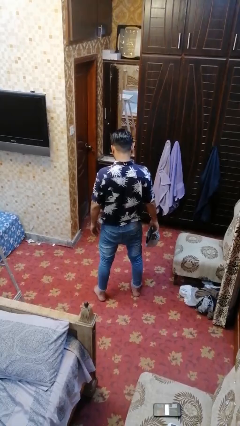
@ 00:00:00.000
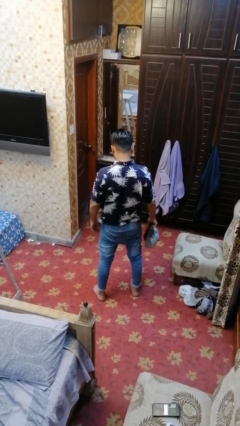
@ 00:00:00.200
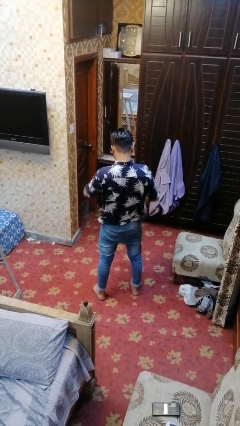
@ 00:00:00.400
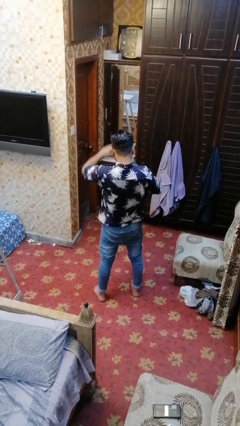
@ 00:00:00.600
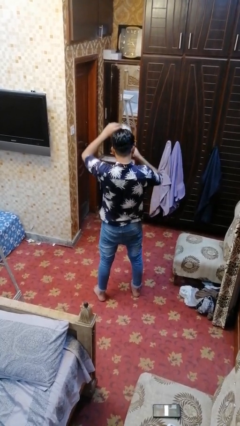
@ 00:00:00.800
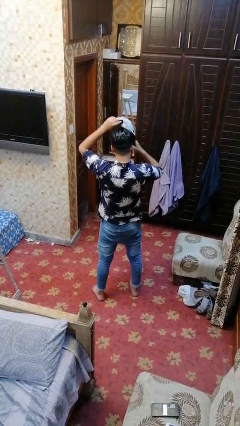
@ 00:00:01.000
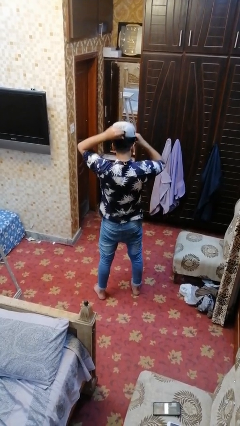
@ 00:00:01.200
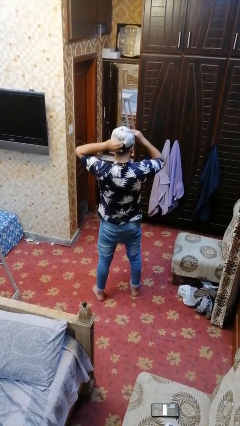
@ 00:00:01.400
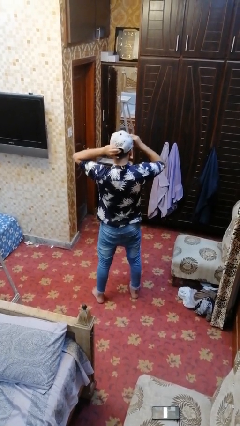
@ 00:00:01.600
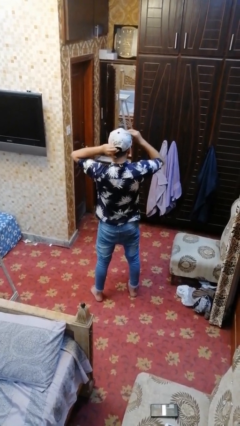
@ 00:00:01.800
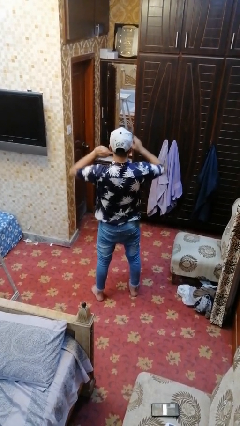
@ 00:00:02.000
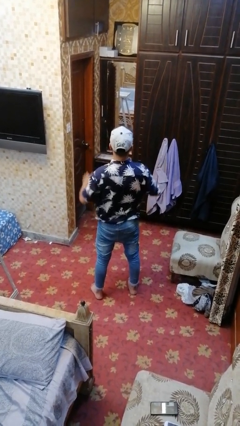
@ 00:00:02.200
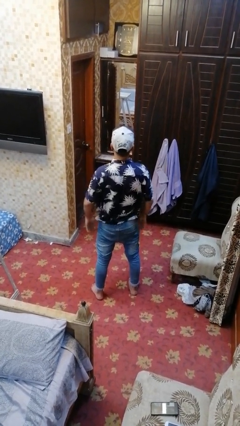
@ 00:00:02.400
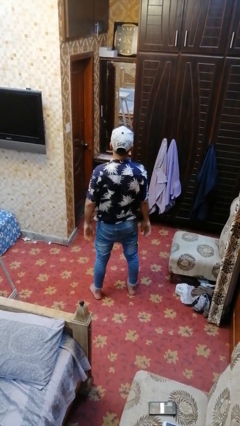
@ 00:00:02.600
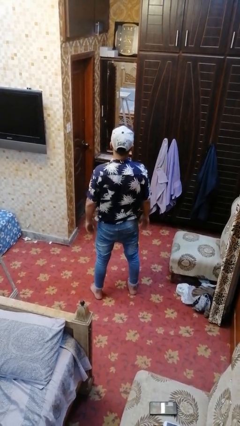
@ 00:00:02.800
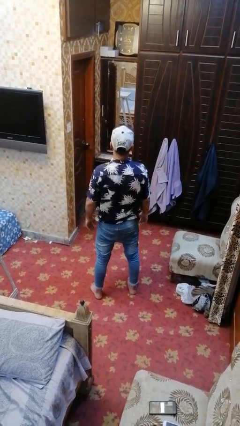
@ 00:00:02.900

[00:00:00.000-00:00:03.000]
person puts on hat

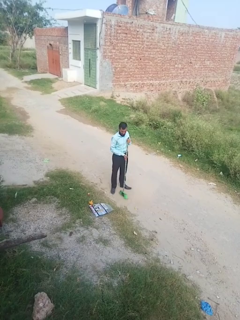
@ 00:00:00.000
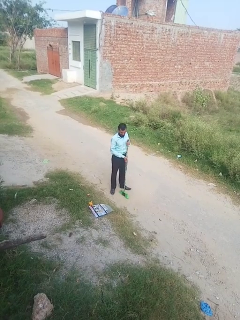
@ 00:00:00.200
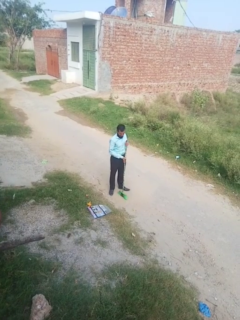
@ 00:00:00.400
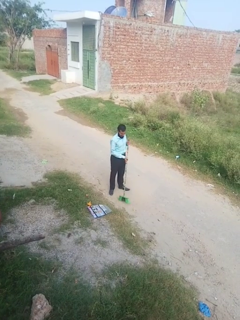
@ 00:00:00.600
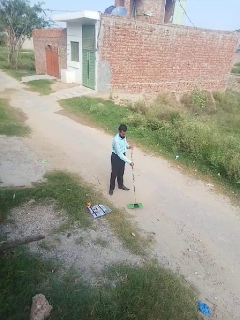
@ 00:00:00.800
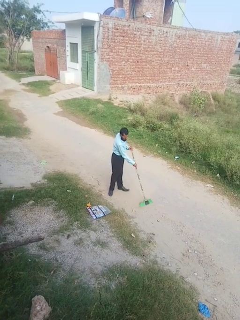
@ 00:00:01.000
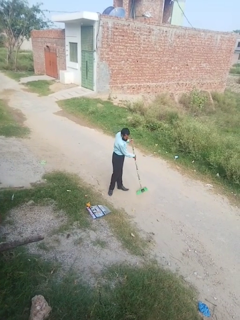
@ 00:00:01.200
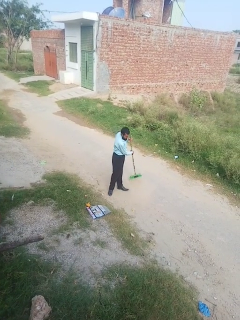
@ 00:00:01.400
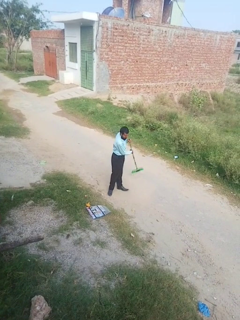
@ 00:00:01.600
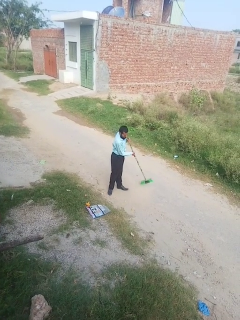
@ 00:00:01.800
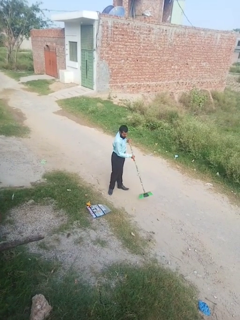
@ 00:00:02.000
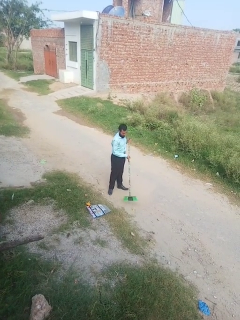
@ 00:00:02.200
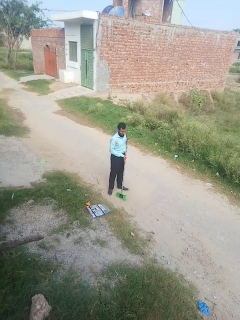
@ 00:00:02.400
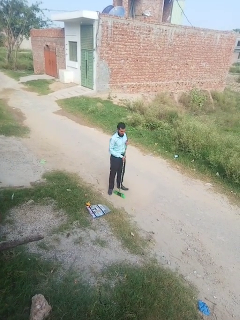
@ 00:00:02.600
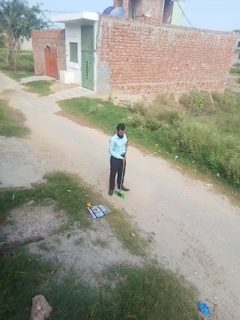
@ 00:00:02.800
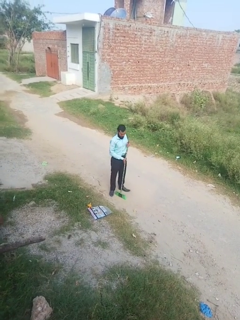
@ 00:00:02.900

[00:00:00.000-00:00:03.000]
person sweeps floor

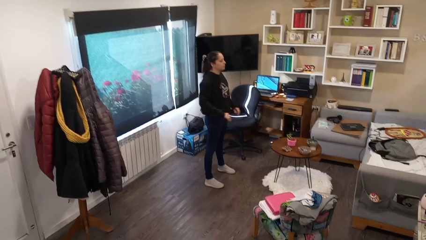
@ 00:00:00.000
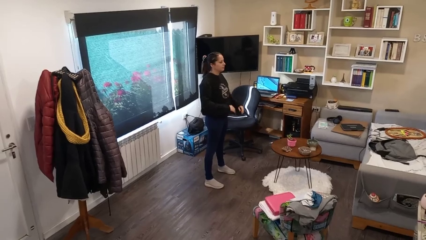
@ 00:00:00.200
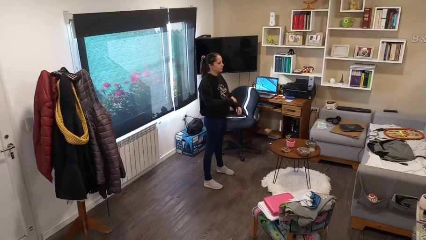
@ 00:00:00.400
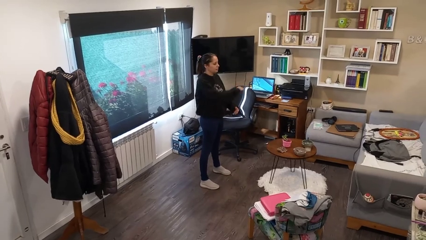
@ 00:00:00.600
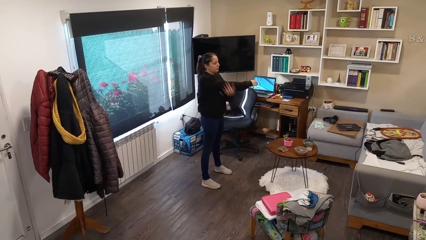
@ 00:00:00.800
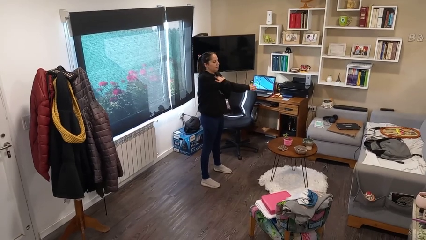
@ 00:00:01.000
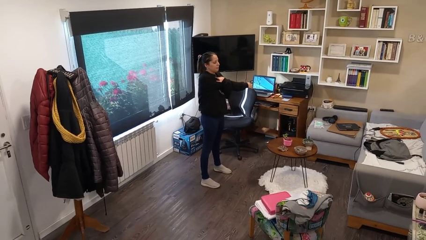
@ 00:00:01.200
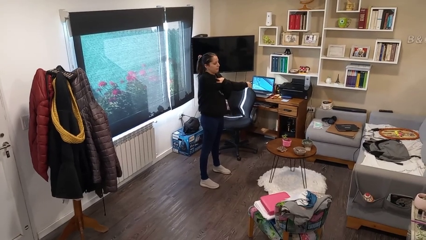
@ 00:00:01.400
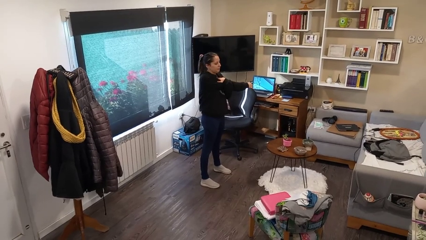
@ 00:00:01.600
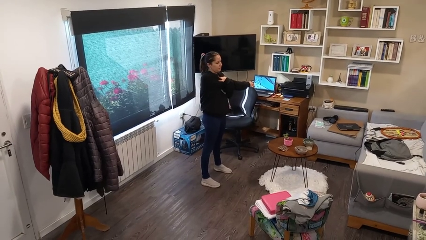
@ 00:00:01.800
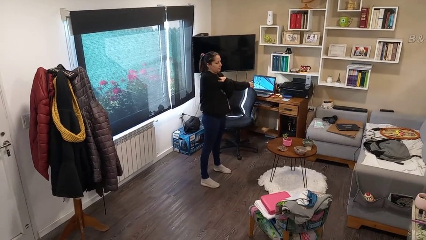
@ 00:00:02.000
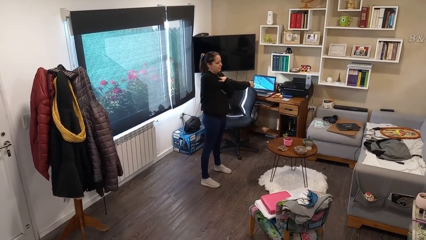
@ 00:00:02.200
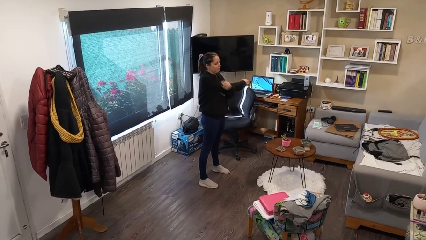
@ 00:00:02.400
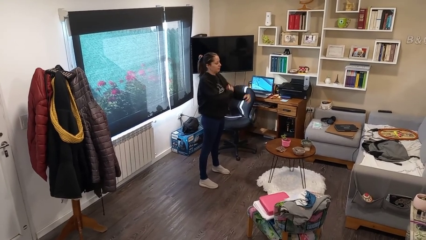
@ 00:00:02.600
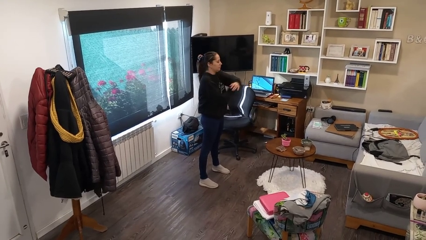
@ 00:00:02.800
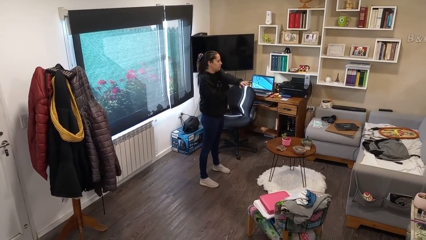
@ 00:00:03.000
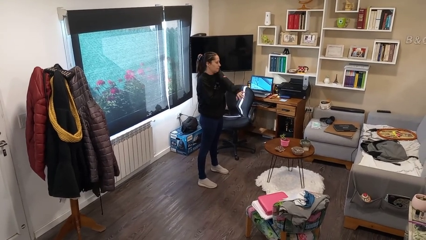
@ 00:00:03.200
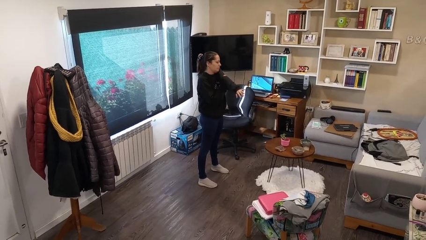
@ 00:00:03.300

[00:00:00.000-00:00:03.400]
person stretches arms to side

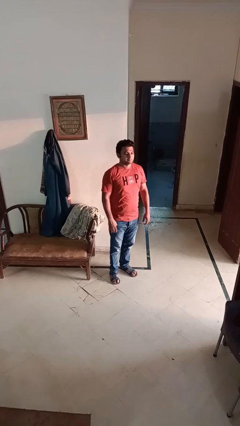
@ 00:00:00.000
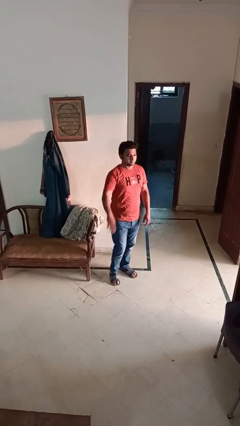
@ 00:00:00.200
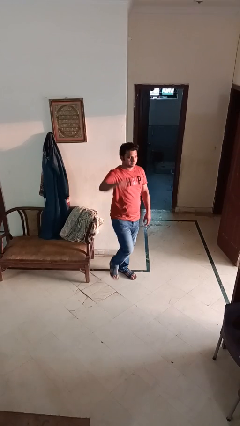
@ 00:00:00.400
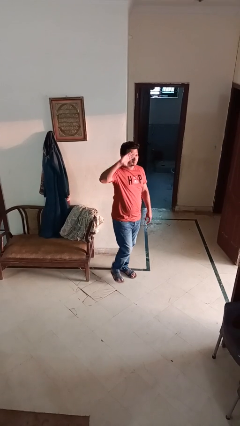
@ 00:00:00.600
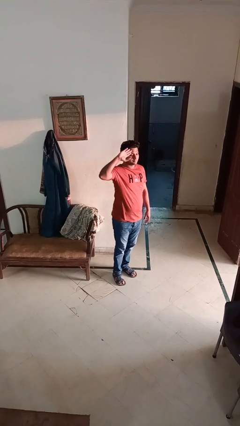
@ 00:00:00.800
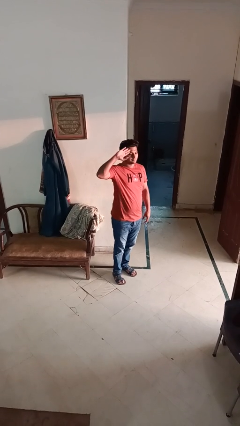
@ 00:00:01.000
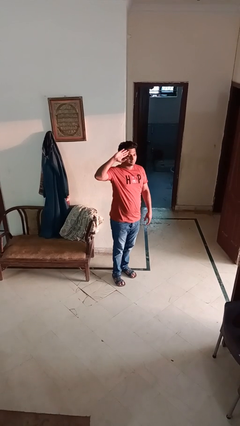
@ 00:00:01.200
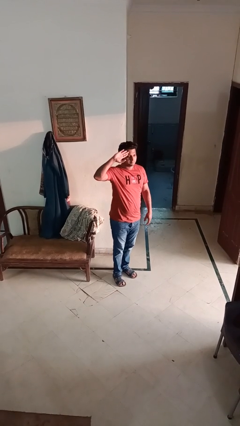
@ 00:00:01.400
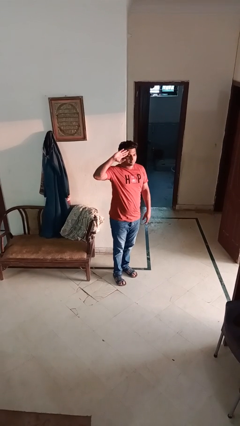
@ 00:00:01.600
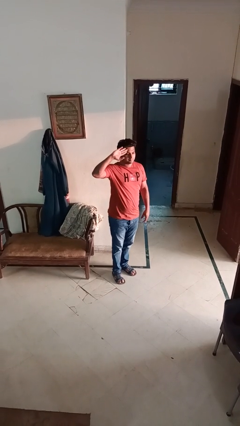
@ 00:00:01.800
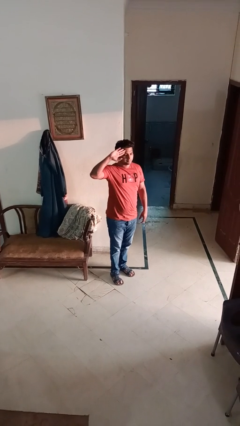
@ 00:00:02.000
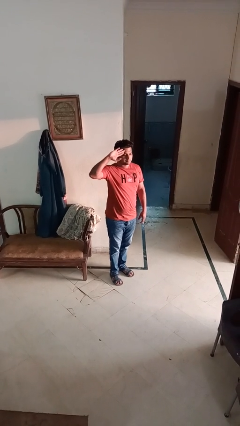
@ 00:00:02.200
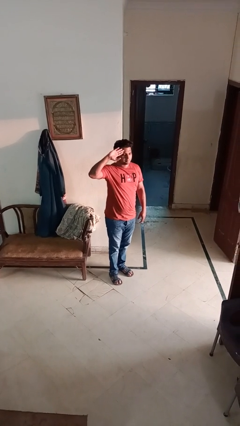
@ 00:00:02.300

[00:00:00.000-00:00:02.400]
person salutes

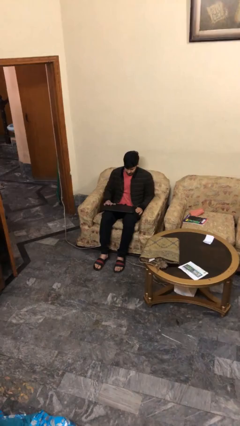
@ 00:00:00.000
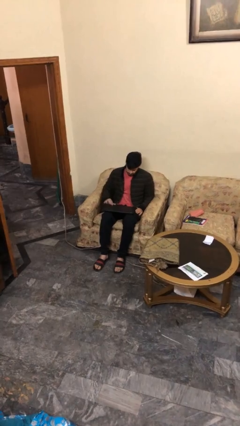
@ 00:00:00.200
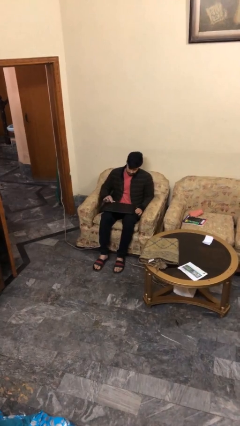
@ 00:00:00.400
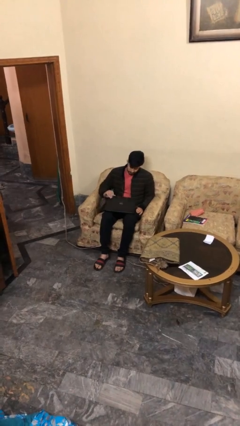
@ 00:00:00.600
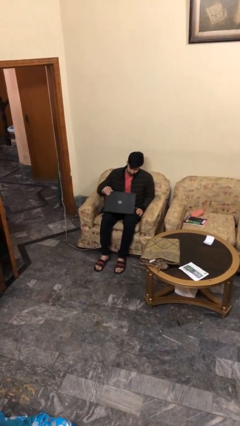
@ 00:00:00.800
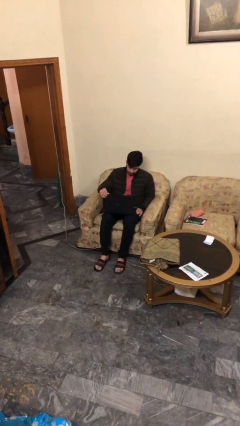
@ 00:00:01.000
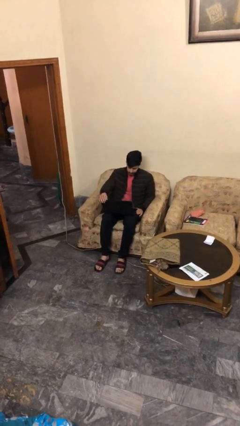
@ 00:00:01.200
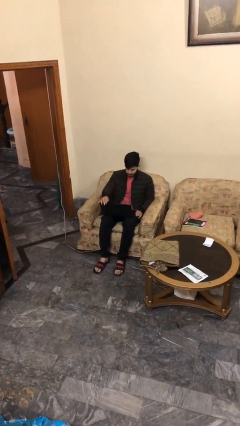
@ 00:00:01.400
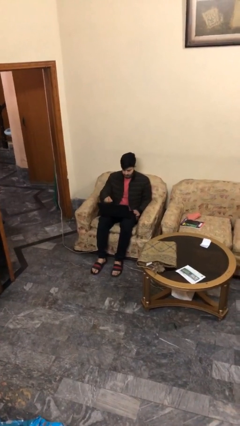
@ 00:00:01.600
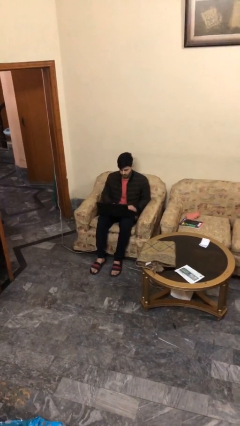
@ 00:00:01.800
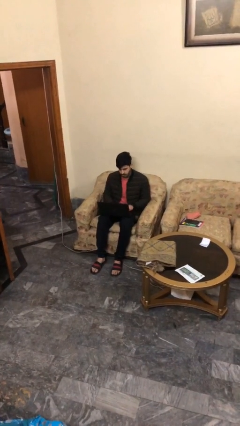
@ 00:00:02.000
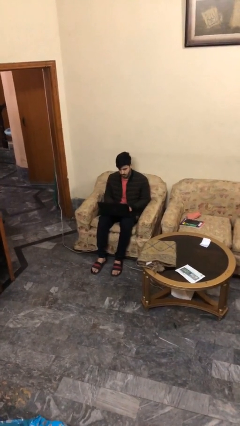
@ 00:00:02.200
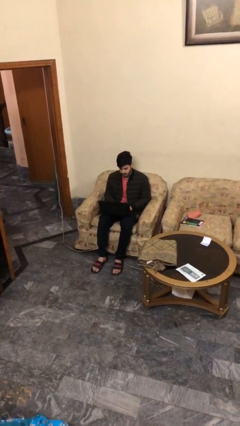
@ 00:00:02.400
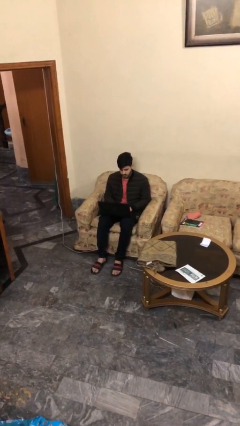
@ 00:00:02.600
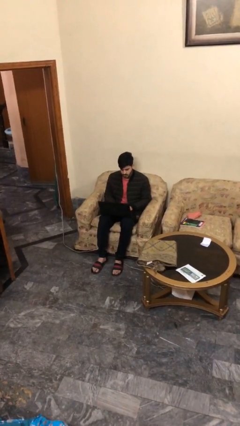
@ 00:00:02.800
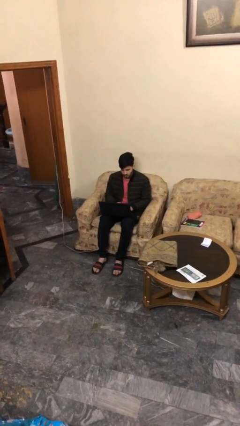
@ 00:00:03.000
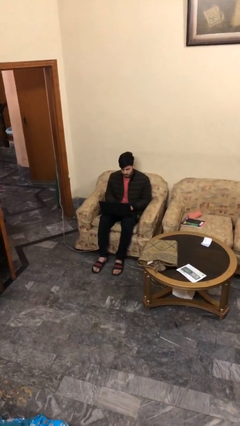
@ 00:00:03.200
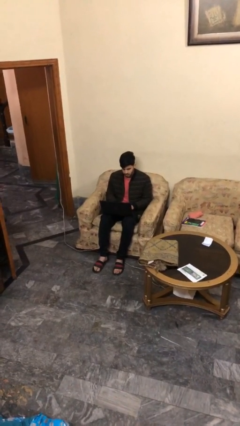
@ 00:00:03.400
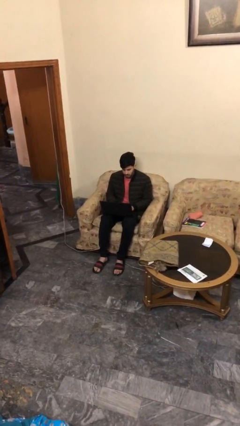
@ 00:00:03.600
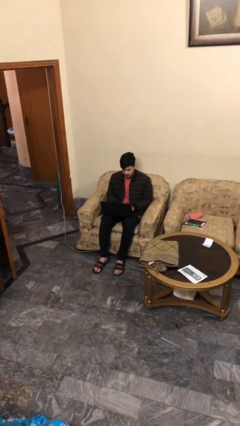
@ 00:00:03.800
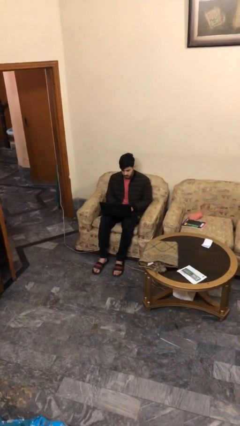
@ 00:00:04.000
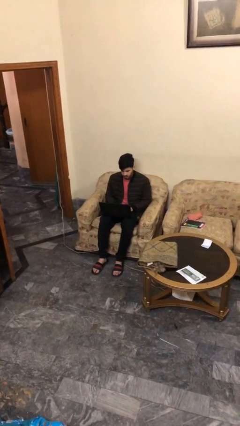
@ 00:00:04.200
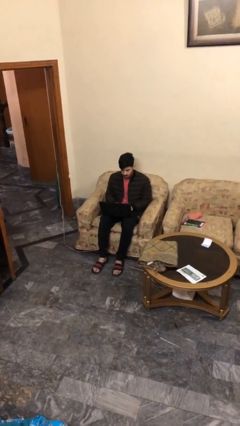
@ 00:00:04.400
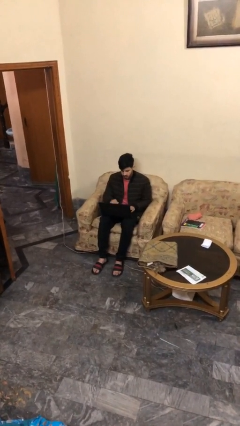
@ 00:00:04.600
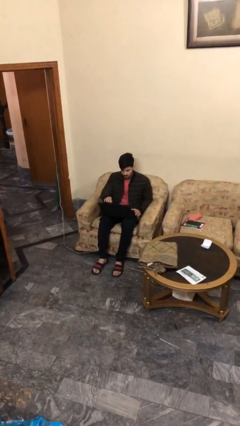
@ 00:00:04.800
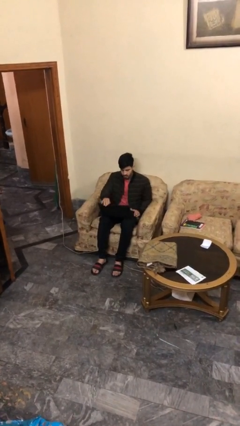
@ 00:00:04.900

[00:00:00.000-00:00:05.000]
person interacts with laptop

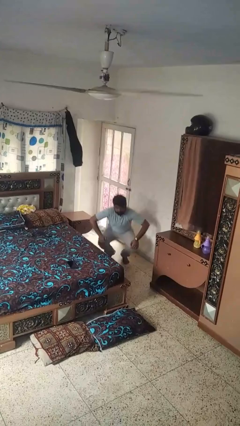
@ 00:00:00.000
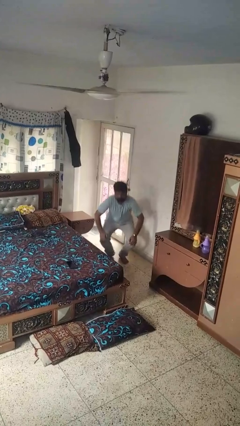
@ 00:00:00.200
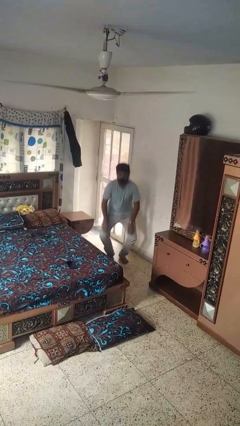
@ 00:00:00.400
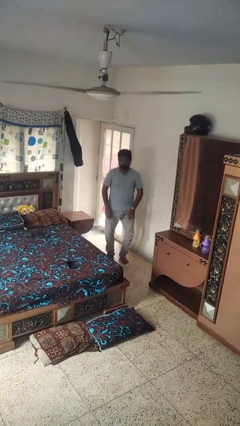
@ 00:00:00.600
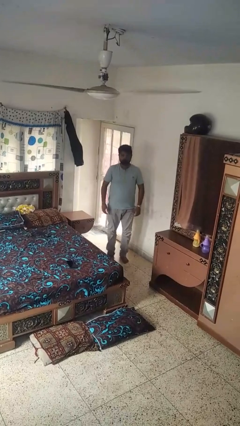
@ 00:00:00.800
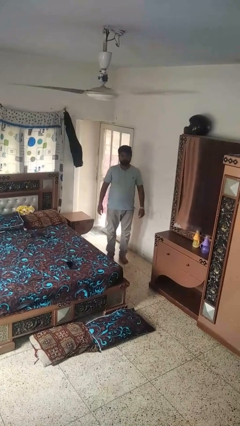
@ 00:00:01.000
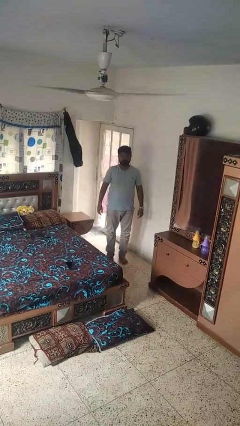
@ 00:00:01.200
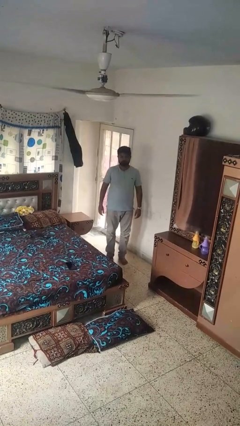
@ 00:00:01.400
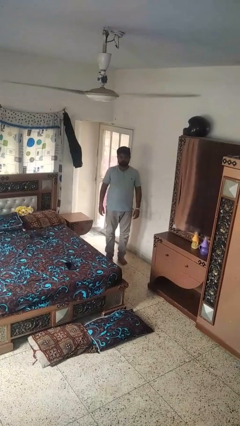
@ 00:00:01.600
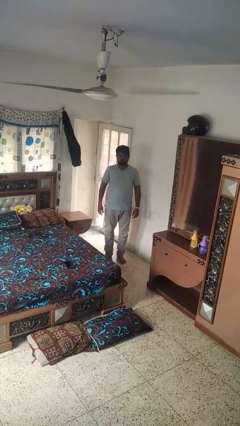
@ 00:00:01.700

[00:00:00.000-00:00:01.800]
person stands up
